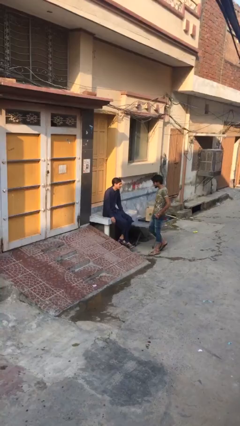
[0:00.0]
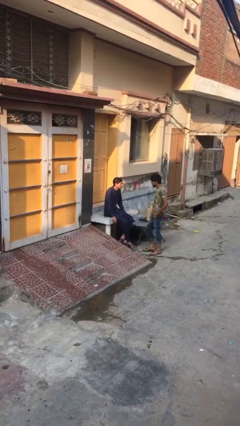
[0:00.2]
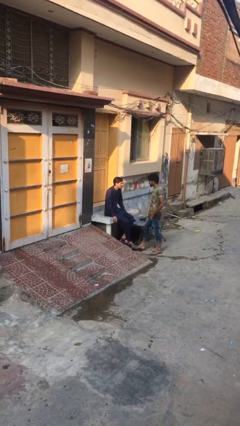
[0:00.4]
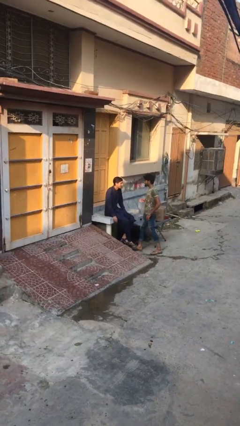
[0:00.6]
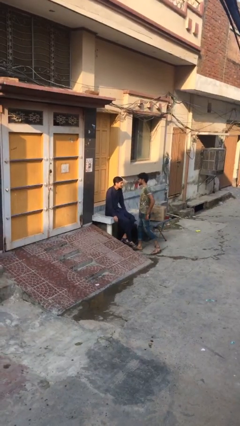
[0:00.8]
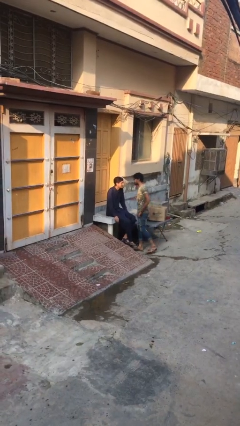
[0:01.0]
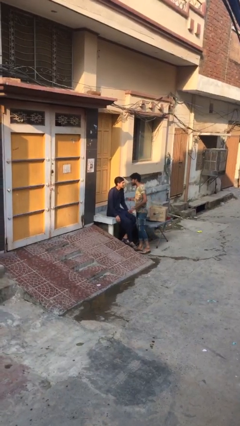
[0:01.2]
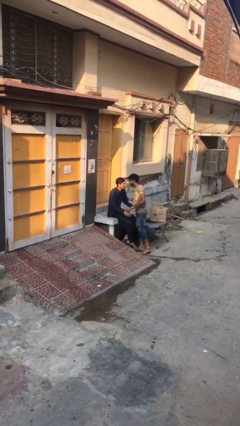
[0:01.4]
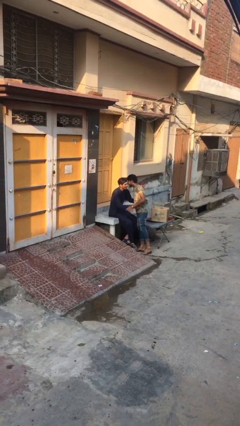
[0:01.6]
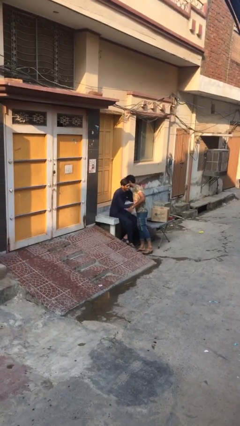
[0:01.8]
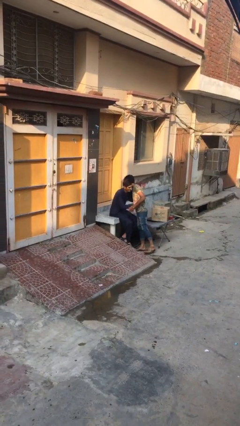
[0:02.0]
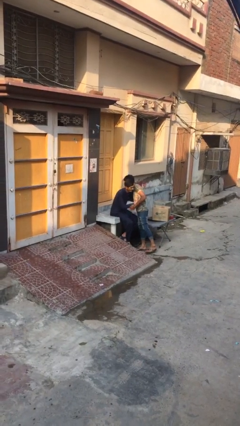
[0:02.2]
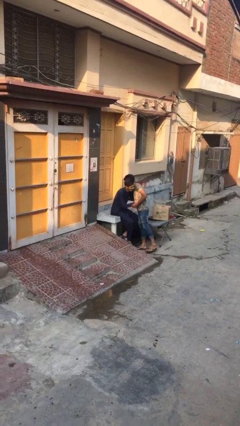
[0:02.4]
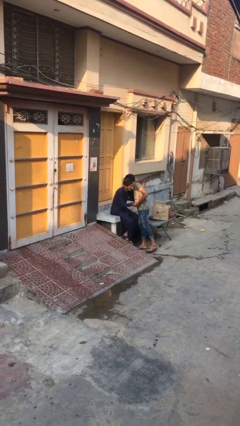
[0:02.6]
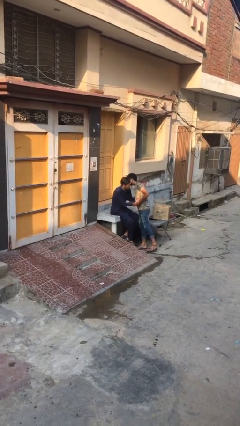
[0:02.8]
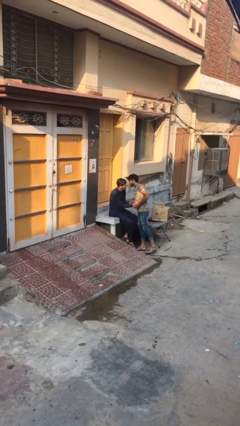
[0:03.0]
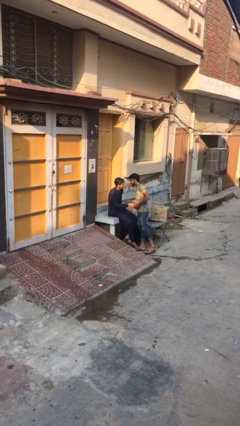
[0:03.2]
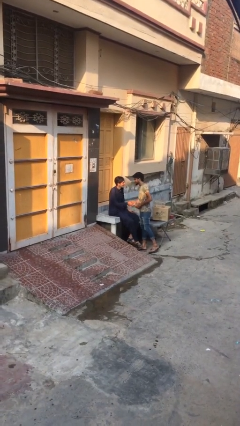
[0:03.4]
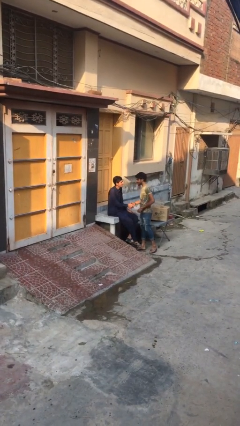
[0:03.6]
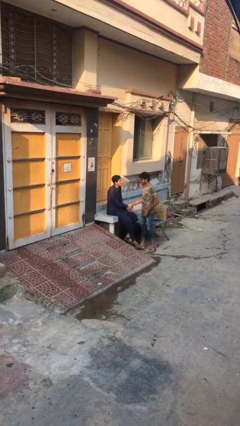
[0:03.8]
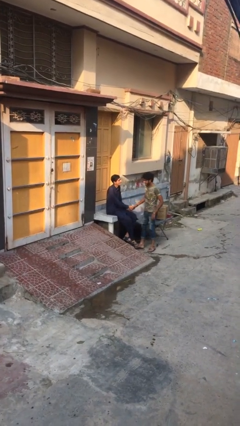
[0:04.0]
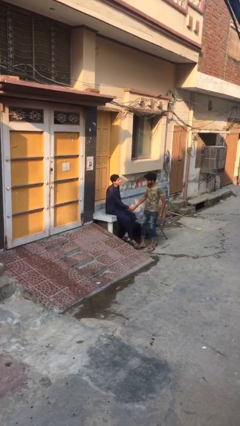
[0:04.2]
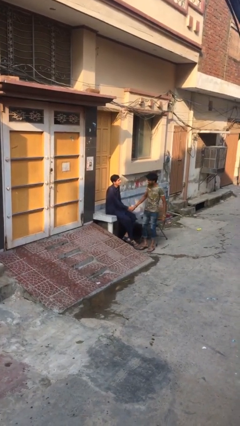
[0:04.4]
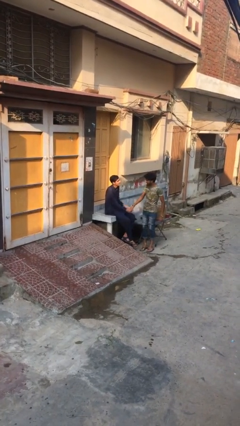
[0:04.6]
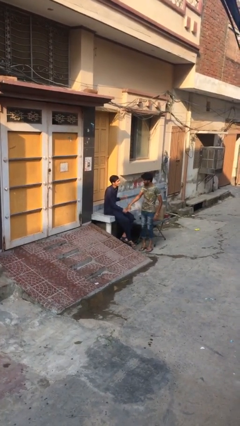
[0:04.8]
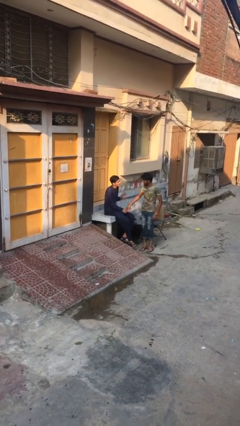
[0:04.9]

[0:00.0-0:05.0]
person embraces person

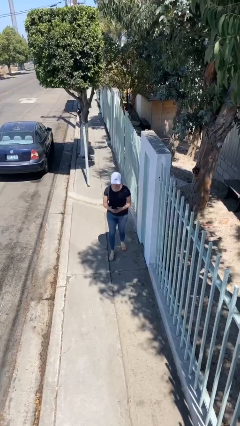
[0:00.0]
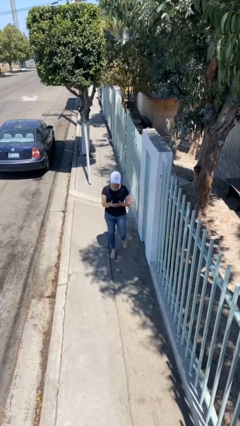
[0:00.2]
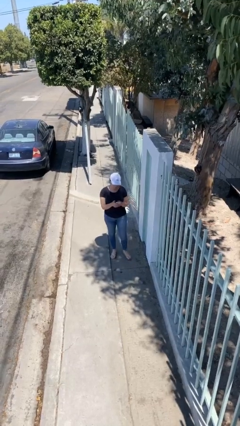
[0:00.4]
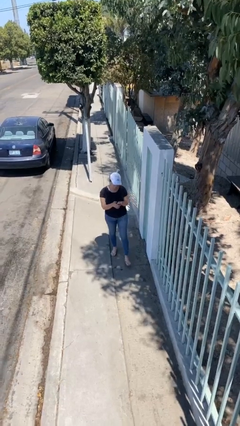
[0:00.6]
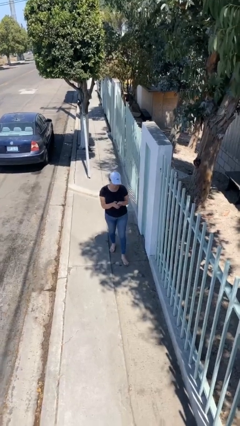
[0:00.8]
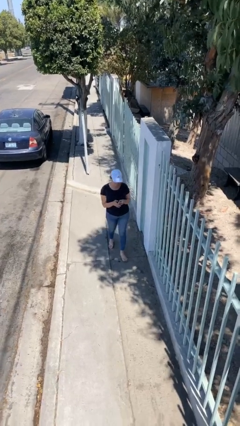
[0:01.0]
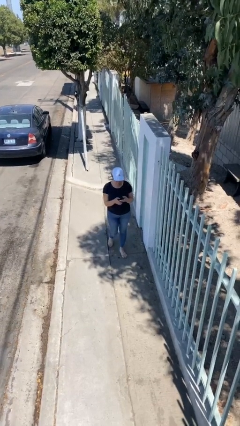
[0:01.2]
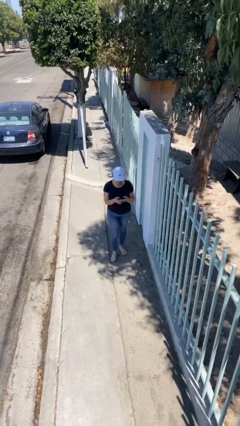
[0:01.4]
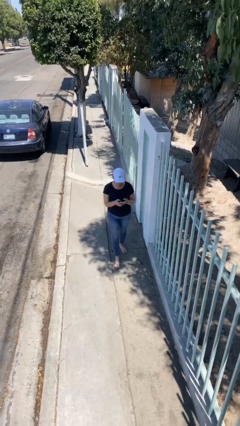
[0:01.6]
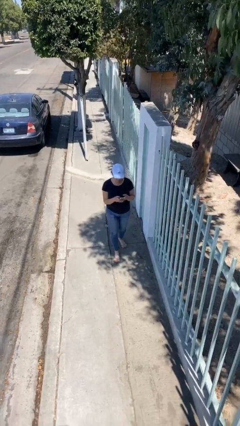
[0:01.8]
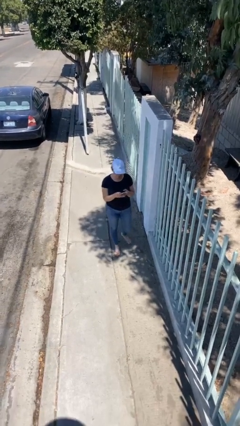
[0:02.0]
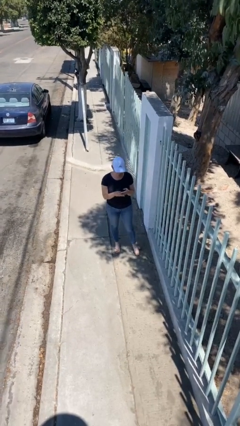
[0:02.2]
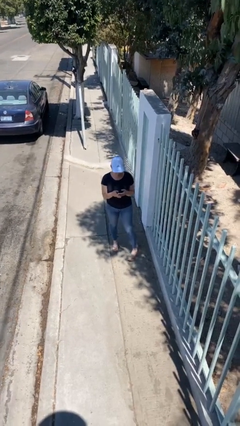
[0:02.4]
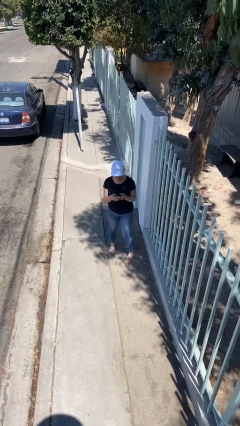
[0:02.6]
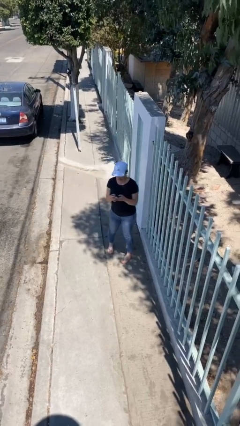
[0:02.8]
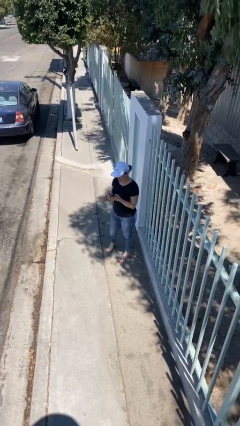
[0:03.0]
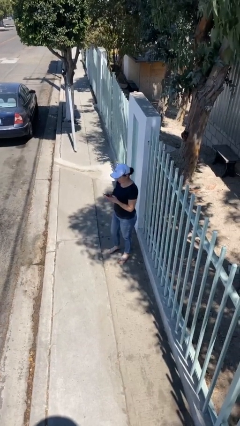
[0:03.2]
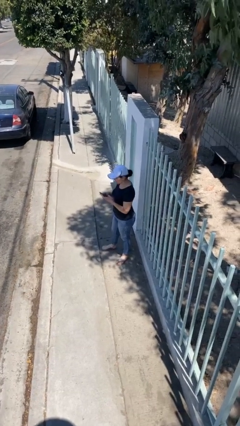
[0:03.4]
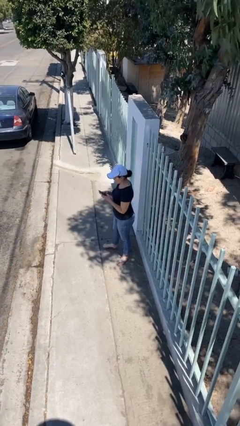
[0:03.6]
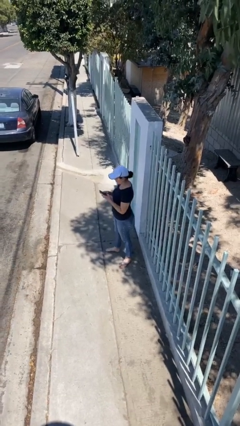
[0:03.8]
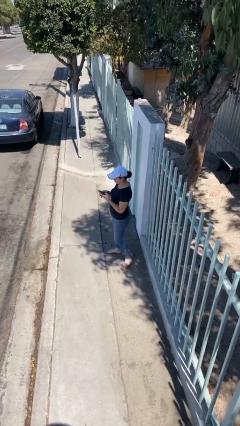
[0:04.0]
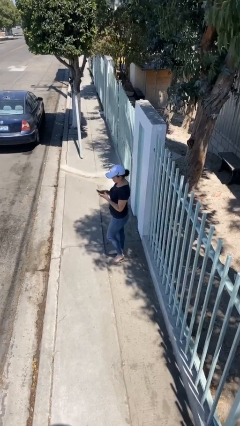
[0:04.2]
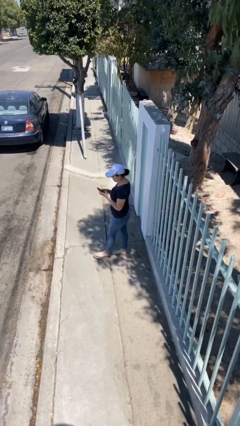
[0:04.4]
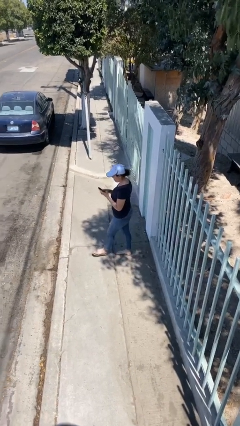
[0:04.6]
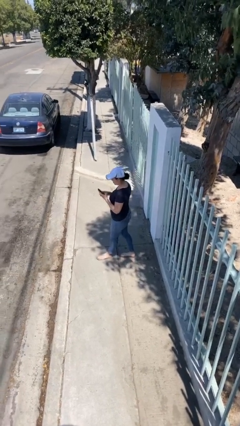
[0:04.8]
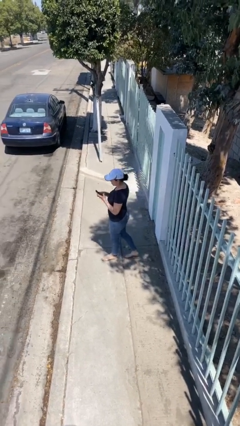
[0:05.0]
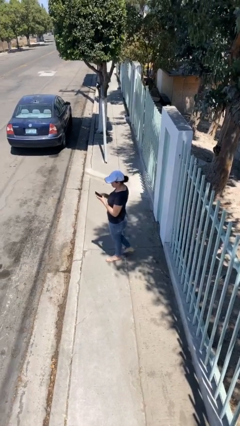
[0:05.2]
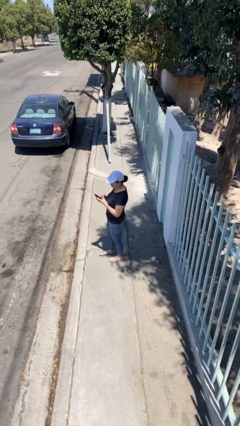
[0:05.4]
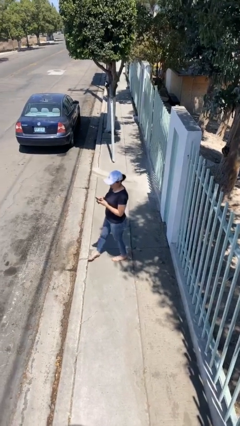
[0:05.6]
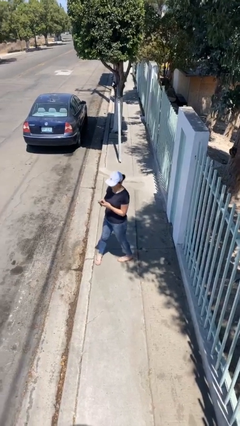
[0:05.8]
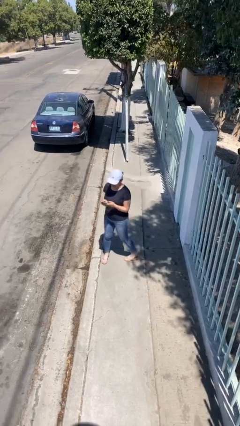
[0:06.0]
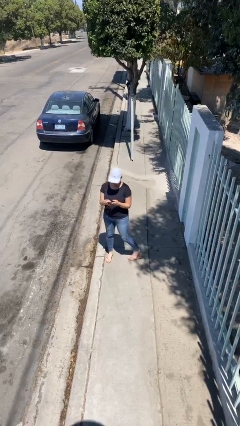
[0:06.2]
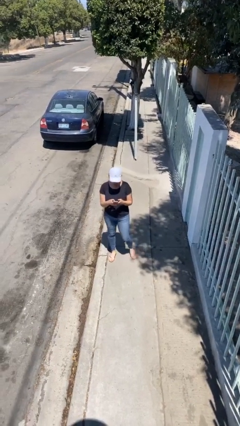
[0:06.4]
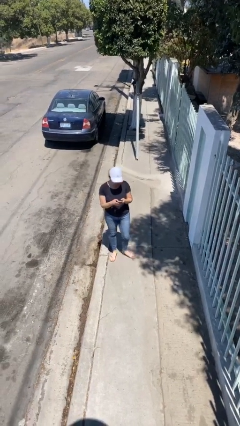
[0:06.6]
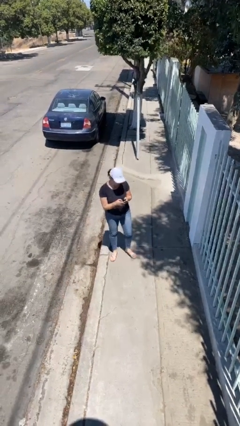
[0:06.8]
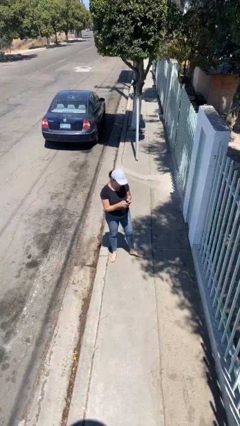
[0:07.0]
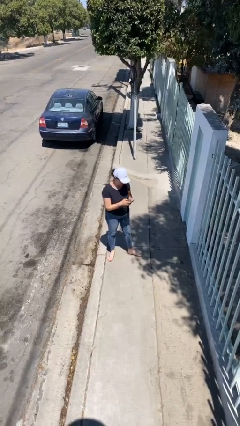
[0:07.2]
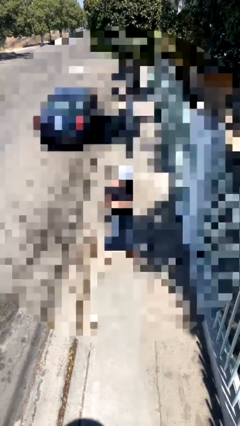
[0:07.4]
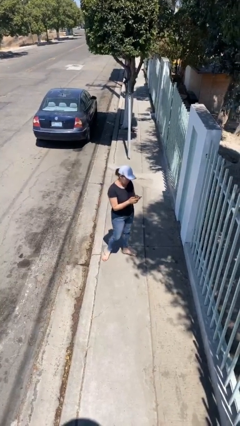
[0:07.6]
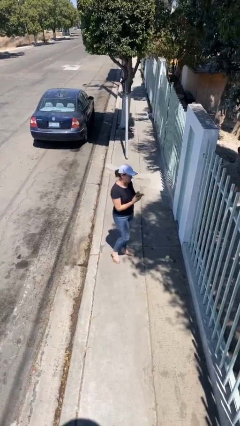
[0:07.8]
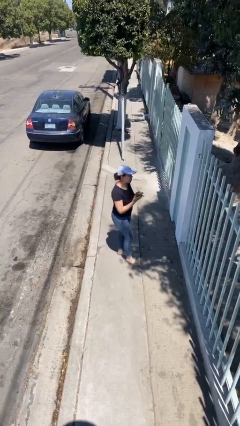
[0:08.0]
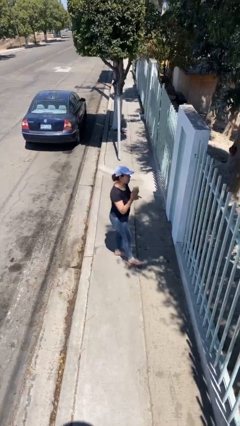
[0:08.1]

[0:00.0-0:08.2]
person texts on phone

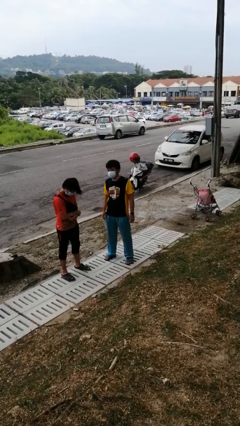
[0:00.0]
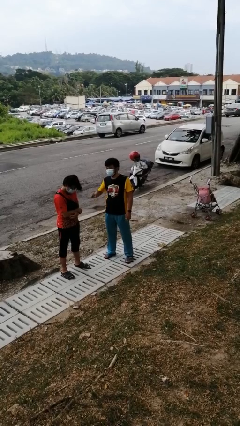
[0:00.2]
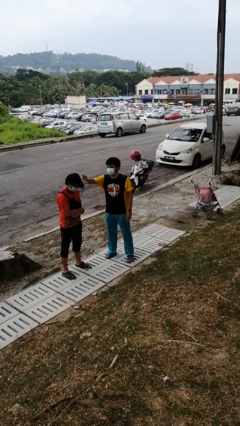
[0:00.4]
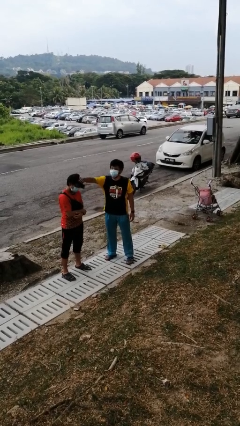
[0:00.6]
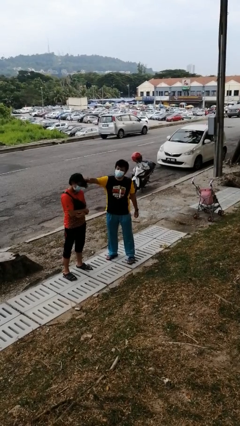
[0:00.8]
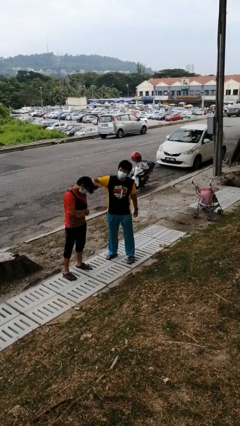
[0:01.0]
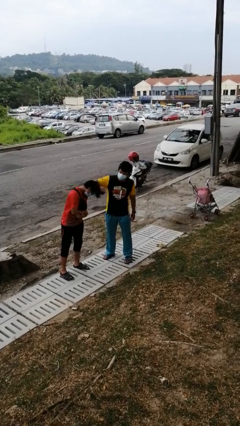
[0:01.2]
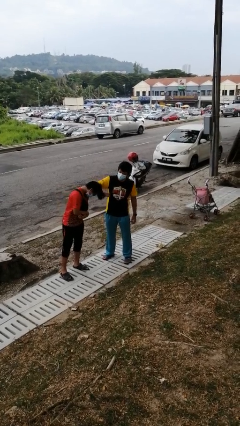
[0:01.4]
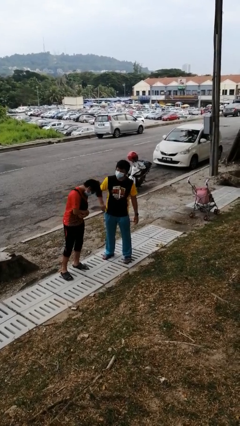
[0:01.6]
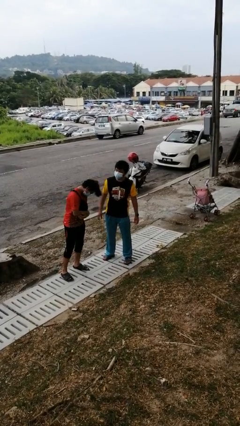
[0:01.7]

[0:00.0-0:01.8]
person grabs person by hair

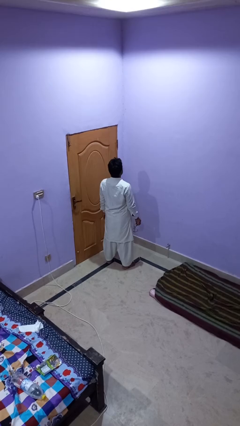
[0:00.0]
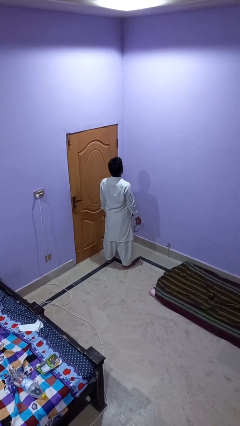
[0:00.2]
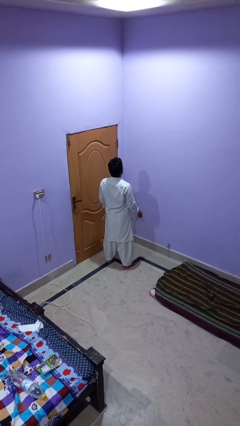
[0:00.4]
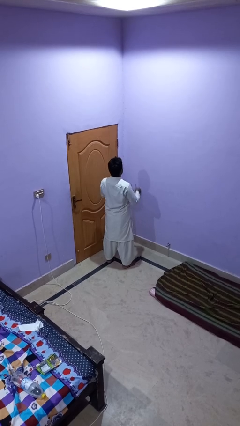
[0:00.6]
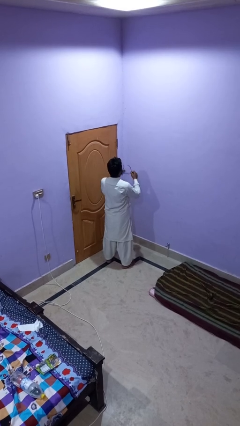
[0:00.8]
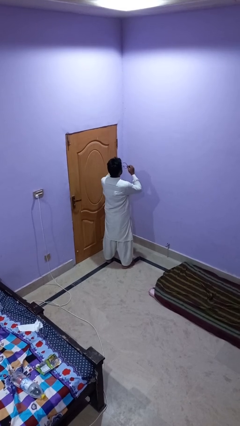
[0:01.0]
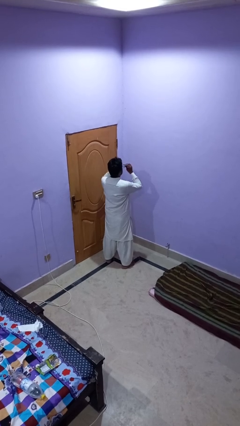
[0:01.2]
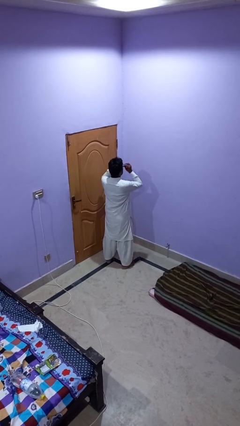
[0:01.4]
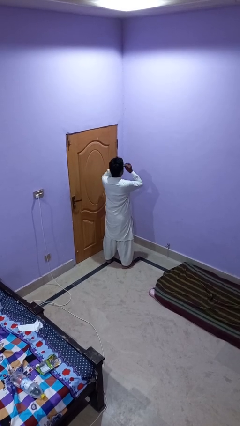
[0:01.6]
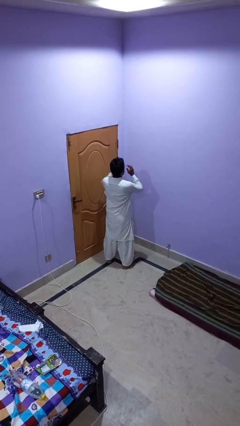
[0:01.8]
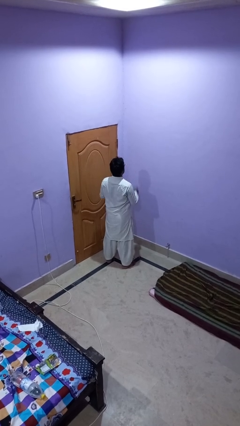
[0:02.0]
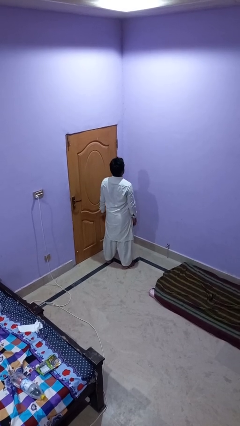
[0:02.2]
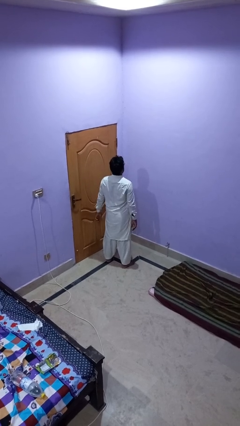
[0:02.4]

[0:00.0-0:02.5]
person puts on glasses
